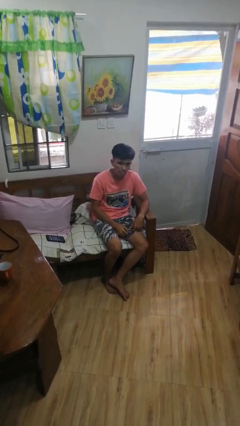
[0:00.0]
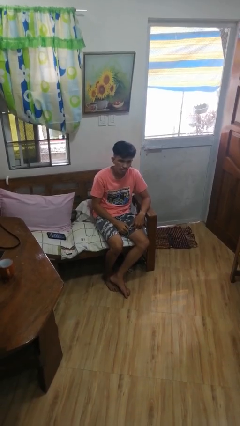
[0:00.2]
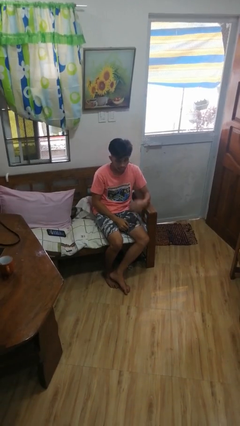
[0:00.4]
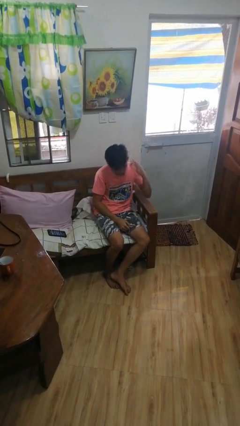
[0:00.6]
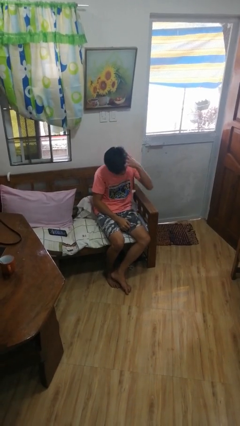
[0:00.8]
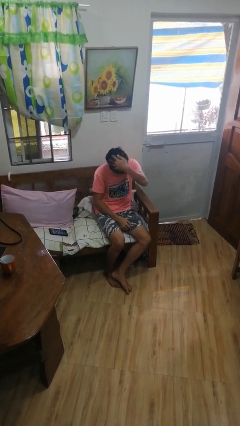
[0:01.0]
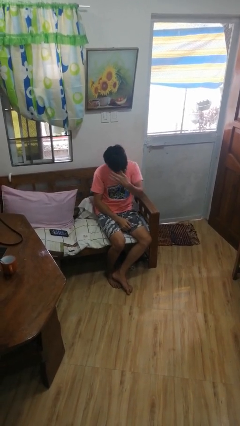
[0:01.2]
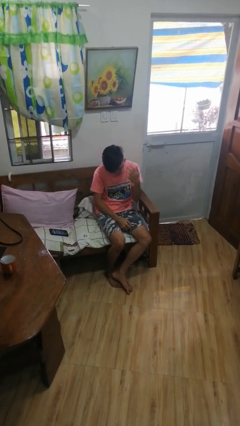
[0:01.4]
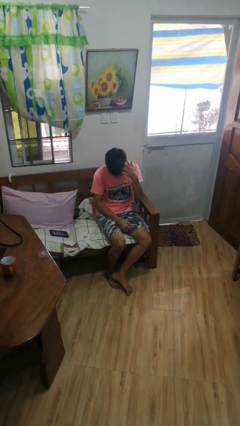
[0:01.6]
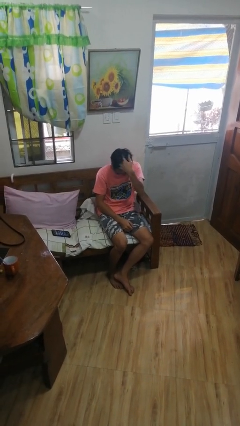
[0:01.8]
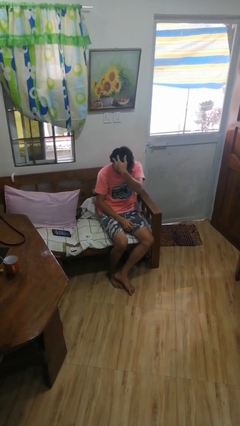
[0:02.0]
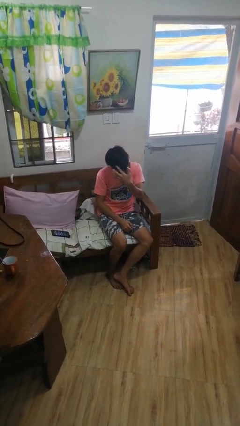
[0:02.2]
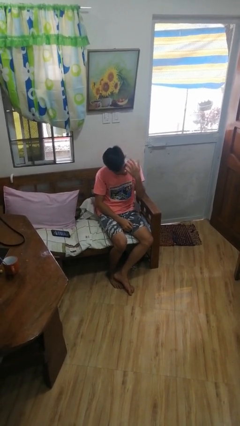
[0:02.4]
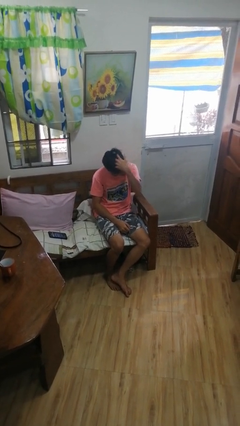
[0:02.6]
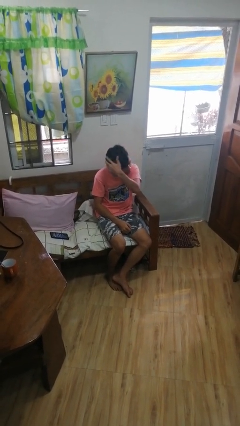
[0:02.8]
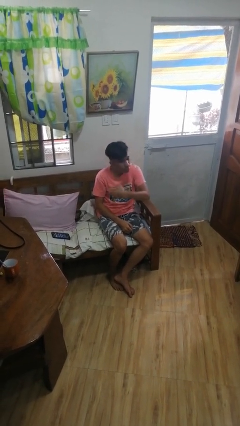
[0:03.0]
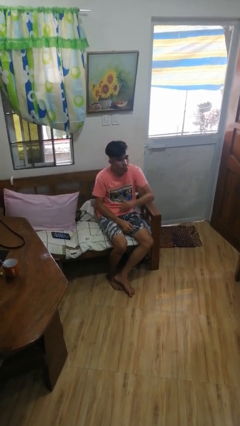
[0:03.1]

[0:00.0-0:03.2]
person strokes hair

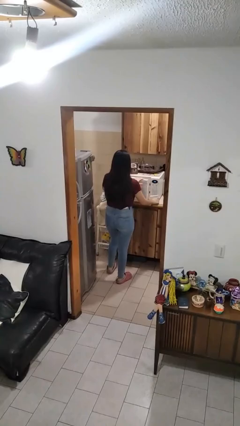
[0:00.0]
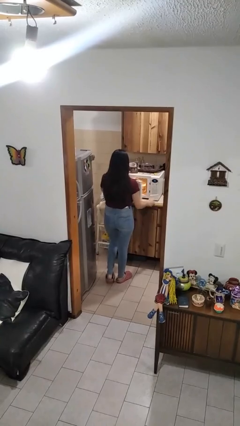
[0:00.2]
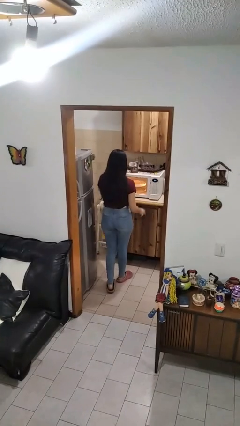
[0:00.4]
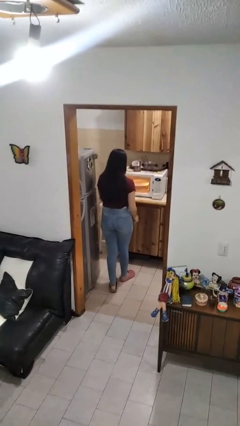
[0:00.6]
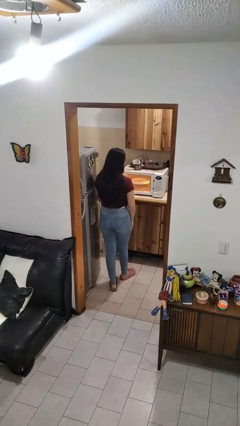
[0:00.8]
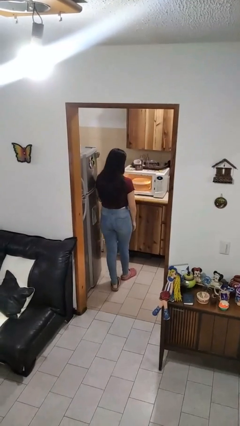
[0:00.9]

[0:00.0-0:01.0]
person opens microwave

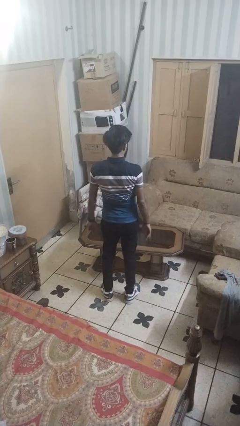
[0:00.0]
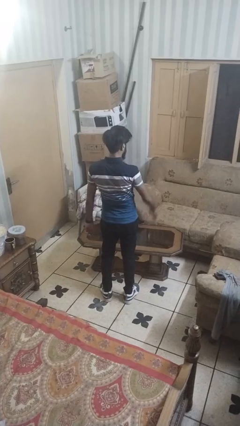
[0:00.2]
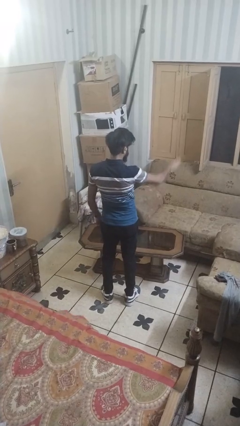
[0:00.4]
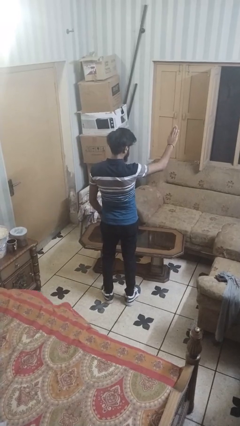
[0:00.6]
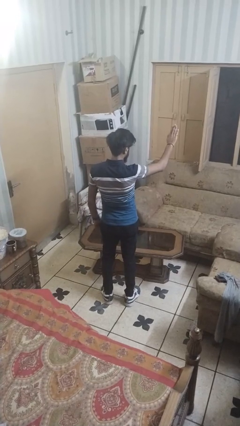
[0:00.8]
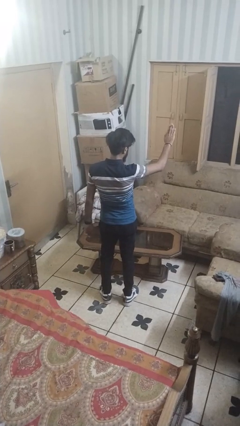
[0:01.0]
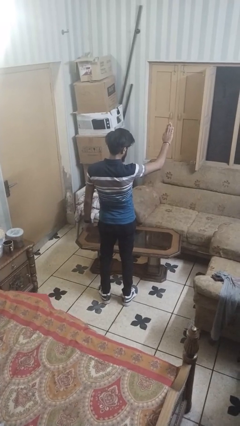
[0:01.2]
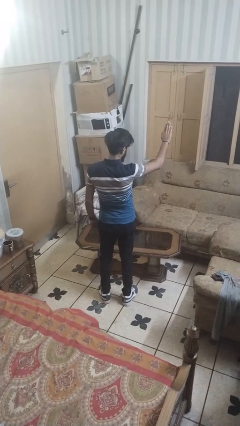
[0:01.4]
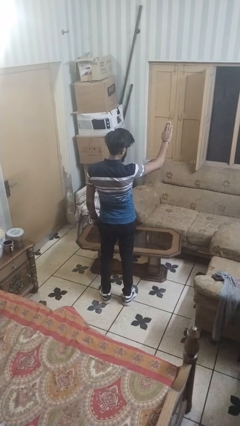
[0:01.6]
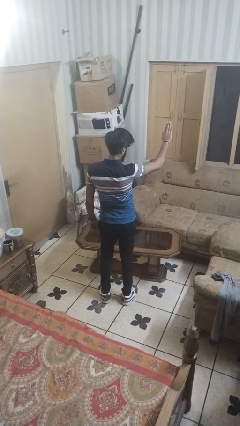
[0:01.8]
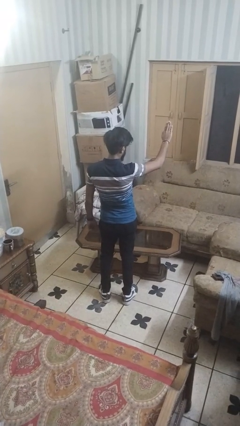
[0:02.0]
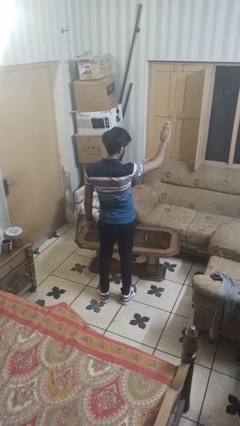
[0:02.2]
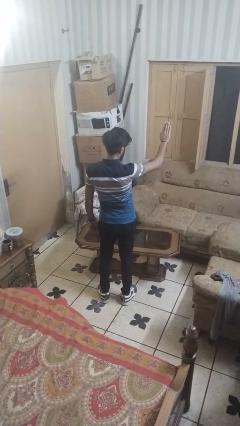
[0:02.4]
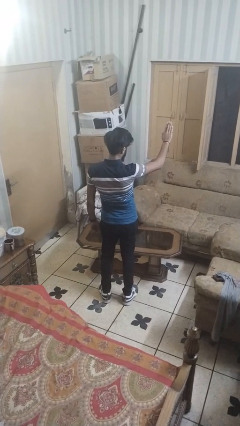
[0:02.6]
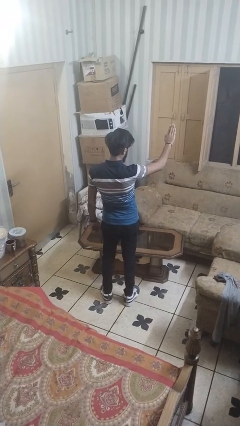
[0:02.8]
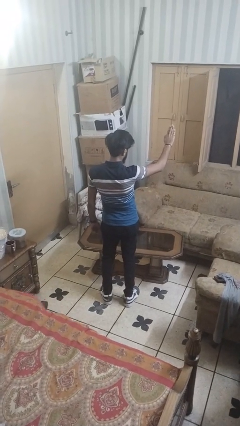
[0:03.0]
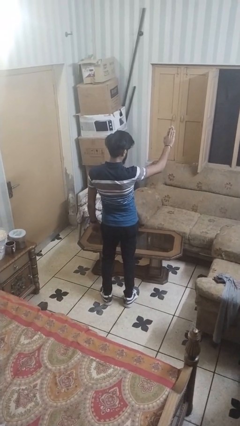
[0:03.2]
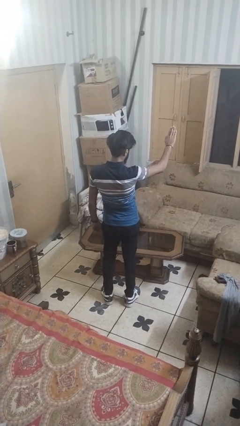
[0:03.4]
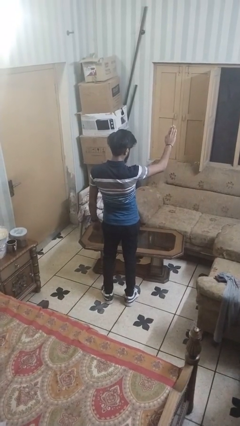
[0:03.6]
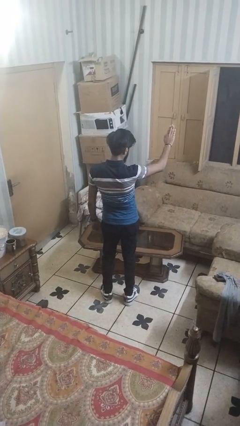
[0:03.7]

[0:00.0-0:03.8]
person gestures stop

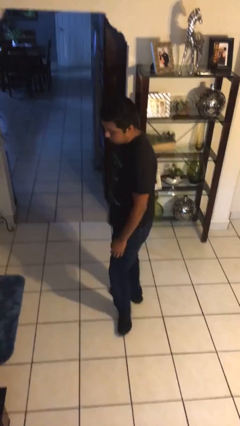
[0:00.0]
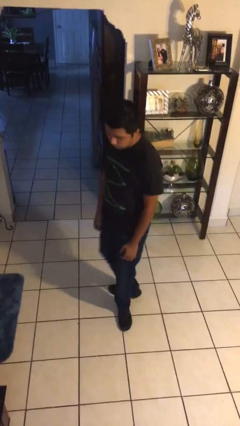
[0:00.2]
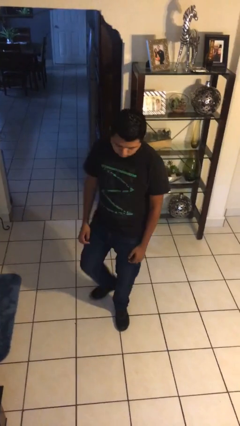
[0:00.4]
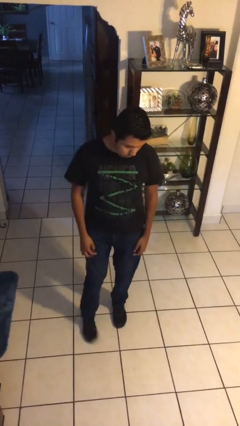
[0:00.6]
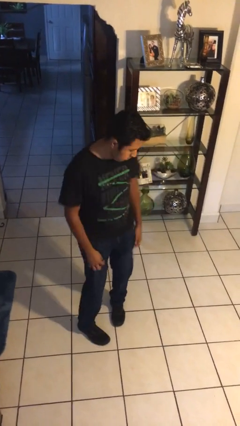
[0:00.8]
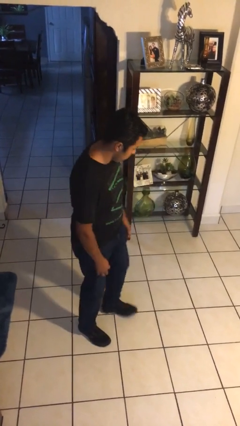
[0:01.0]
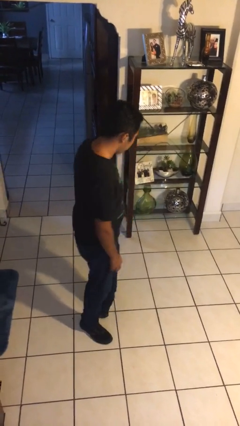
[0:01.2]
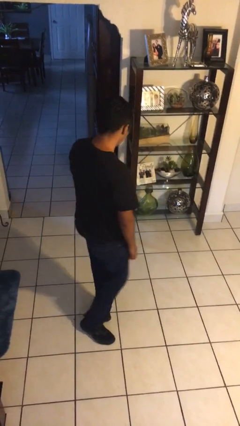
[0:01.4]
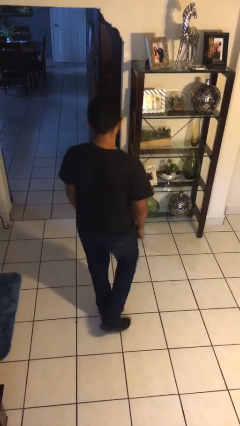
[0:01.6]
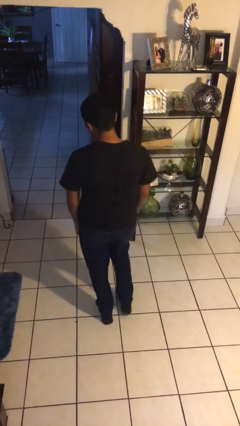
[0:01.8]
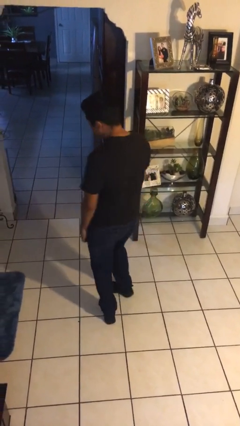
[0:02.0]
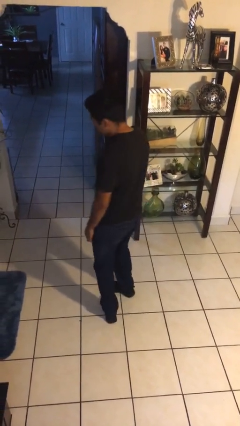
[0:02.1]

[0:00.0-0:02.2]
person twirls

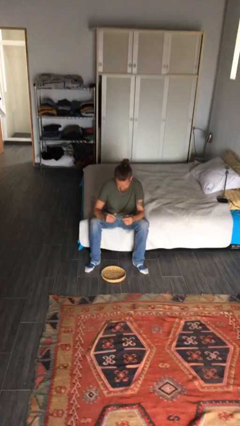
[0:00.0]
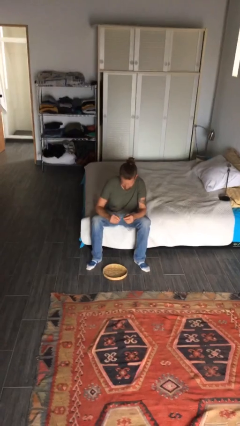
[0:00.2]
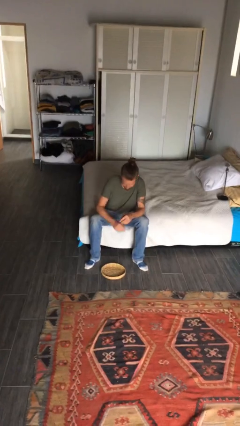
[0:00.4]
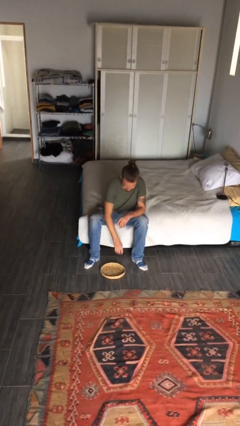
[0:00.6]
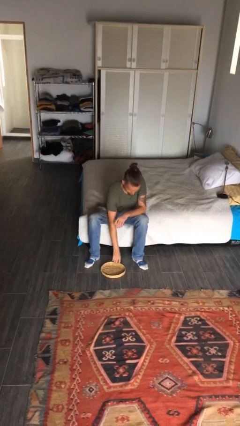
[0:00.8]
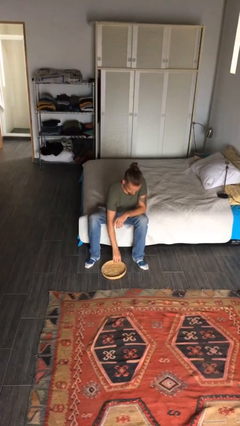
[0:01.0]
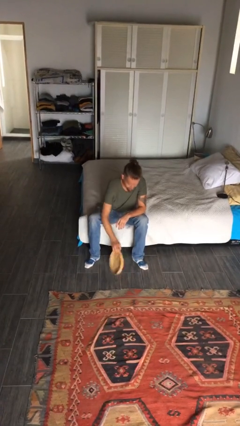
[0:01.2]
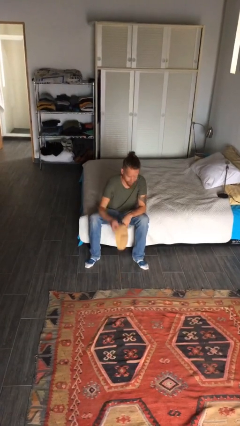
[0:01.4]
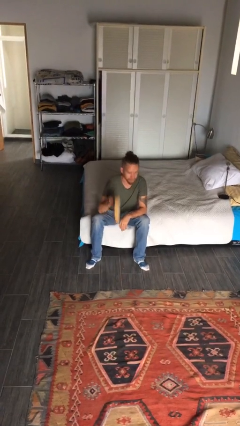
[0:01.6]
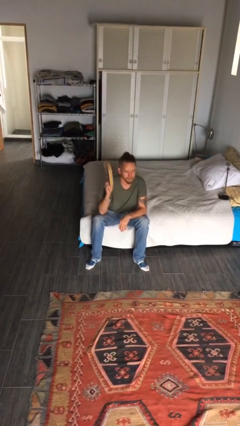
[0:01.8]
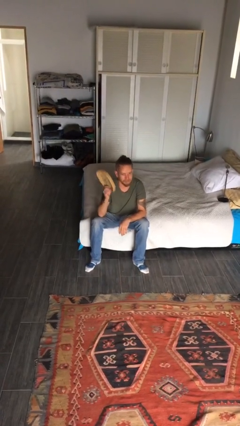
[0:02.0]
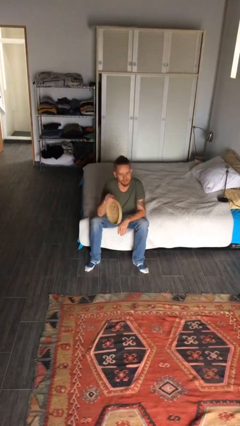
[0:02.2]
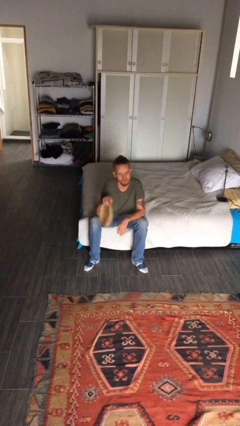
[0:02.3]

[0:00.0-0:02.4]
person picks up object from floor

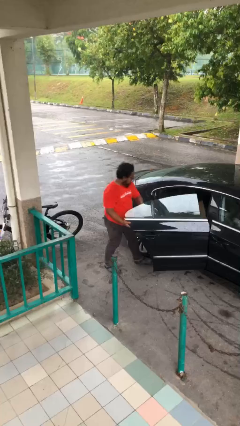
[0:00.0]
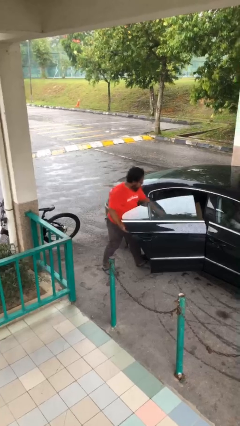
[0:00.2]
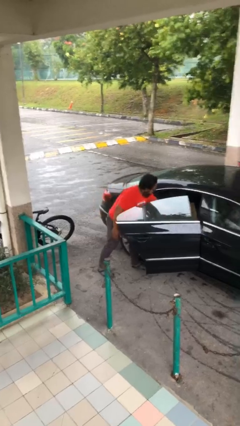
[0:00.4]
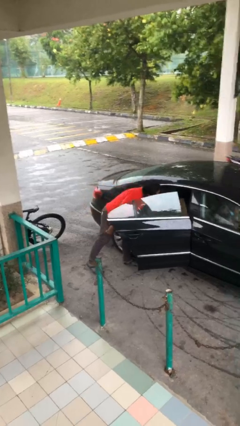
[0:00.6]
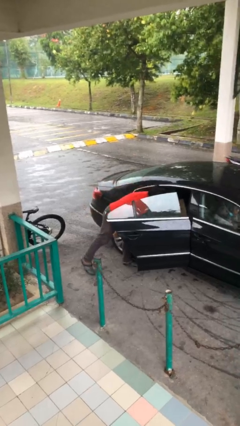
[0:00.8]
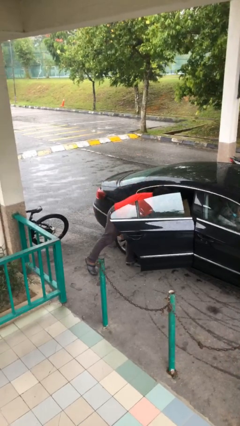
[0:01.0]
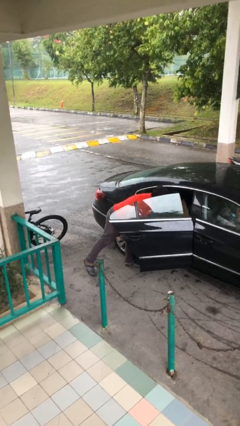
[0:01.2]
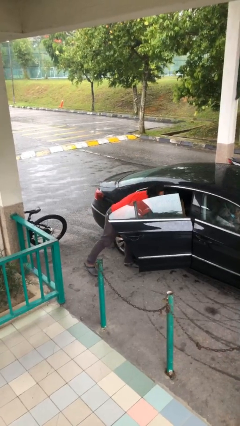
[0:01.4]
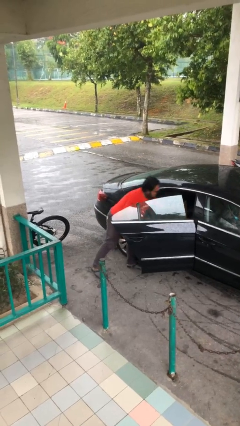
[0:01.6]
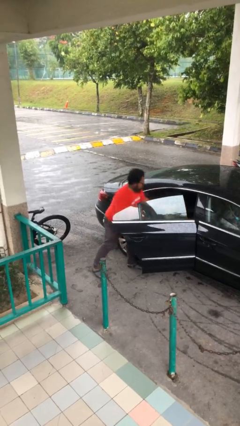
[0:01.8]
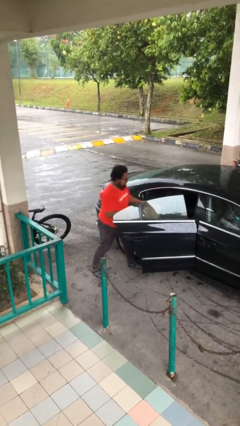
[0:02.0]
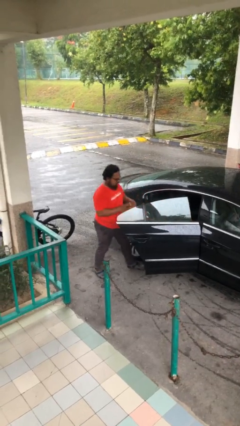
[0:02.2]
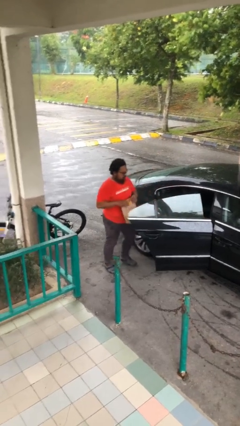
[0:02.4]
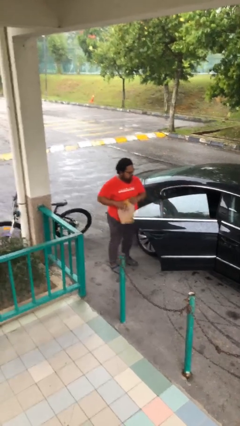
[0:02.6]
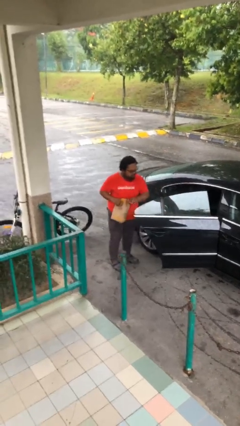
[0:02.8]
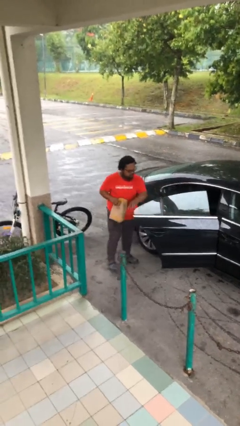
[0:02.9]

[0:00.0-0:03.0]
person unloads car

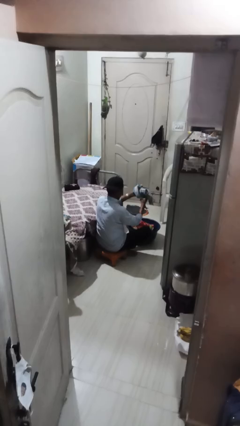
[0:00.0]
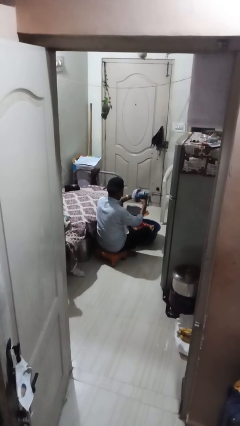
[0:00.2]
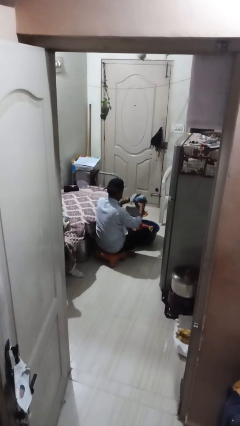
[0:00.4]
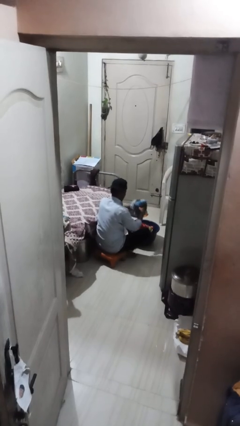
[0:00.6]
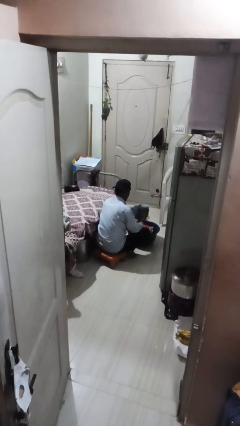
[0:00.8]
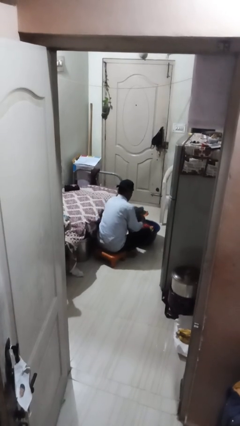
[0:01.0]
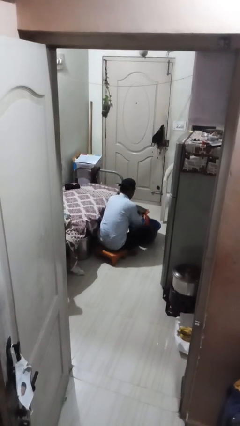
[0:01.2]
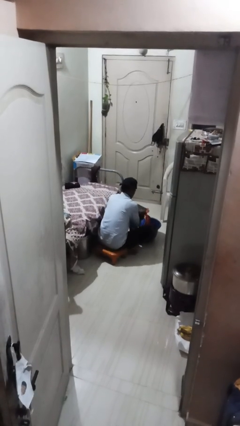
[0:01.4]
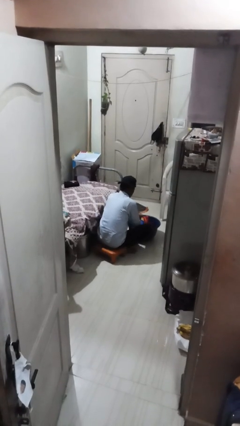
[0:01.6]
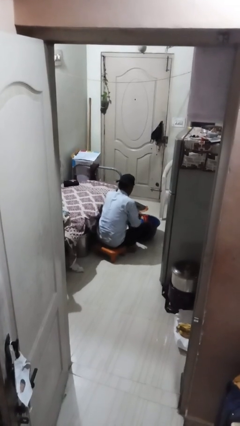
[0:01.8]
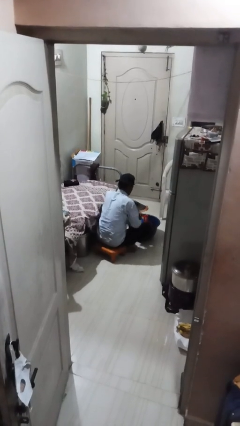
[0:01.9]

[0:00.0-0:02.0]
person puts object into basket
